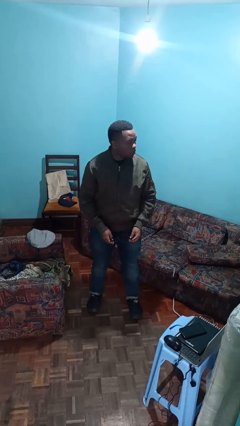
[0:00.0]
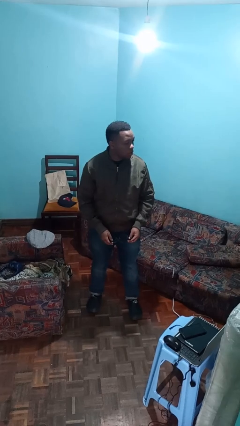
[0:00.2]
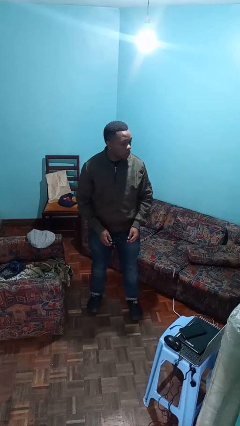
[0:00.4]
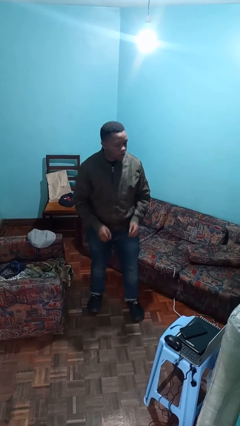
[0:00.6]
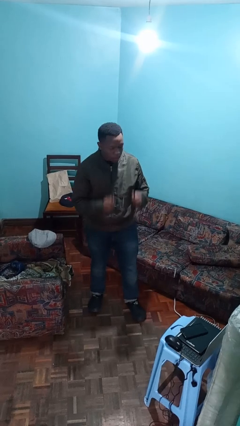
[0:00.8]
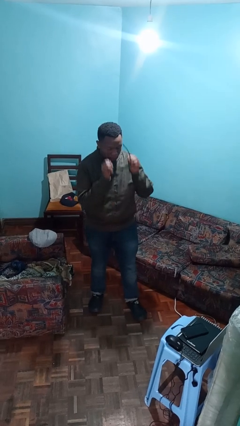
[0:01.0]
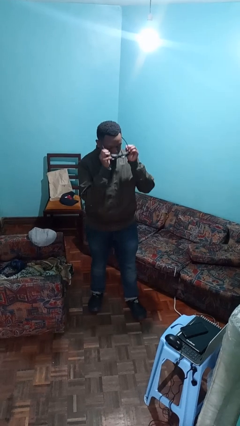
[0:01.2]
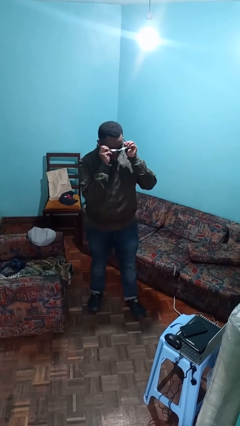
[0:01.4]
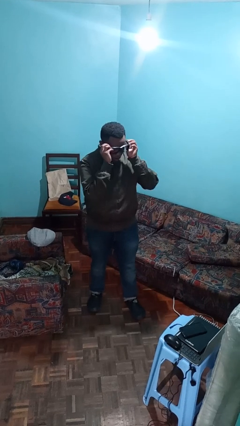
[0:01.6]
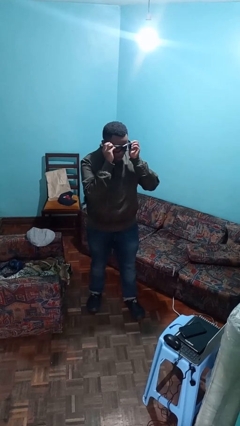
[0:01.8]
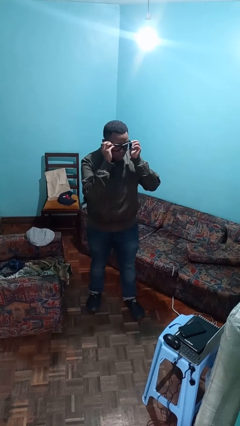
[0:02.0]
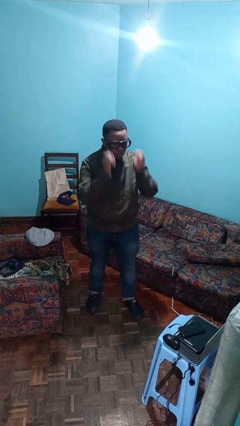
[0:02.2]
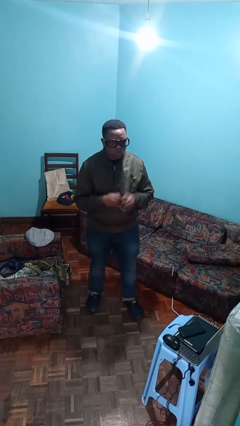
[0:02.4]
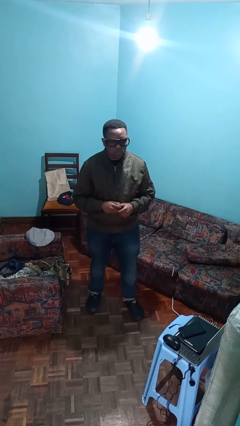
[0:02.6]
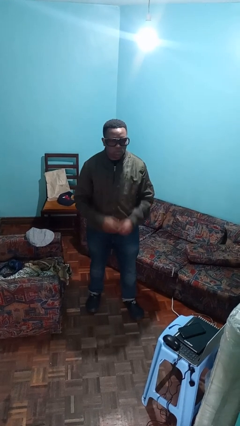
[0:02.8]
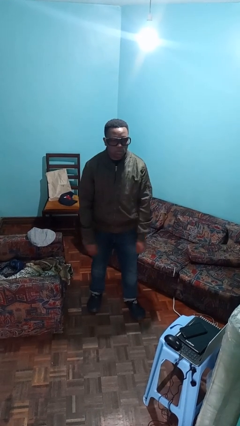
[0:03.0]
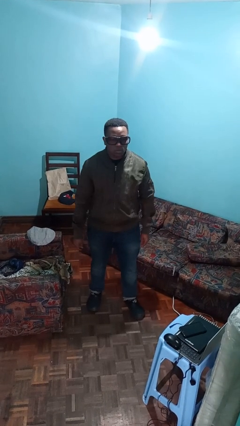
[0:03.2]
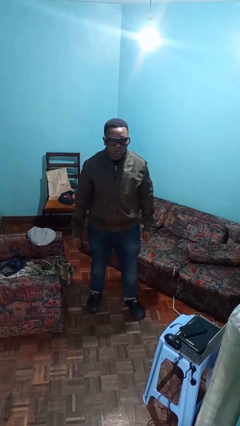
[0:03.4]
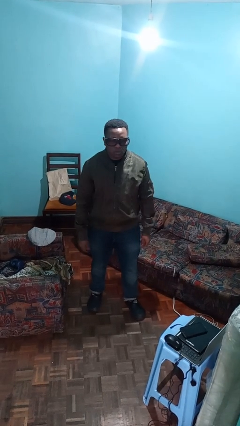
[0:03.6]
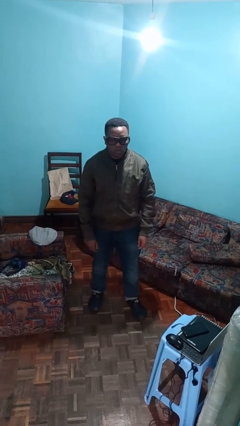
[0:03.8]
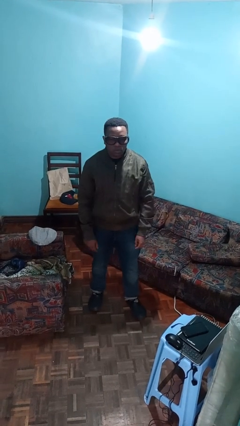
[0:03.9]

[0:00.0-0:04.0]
person puts on glasses

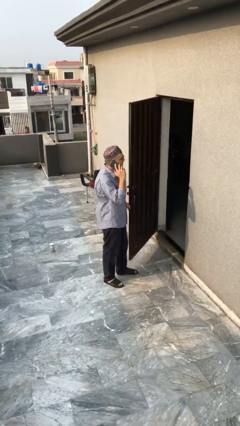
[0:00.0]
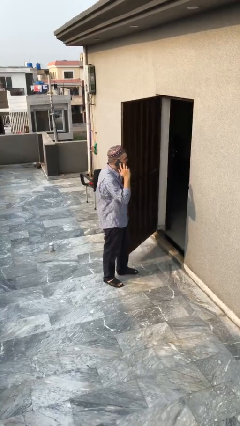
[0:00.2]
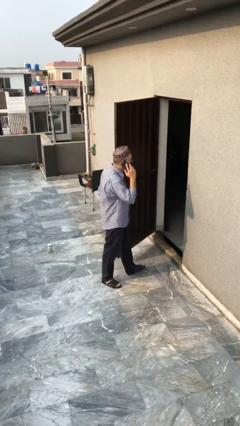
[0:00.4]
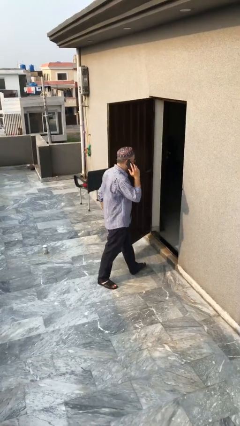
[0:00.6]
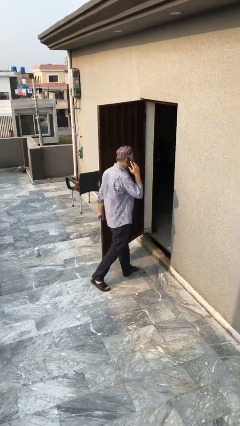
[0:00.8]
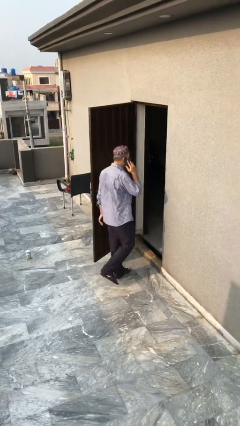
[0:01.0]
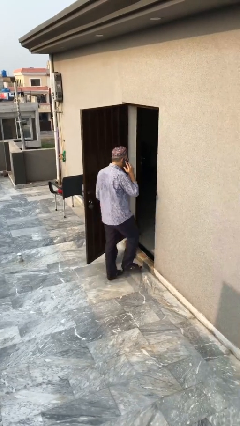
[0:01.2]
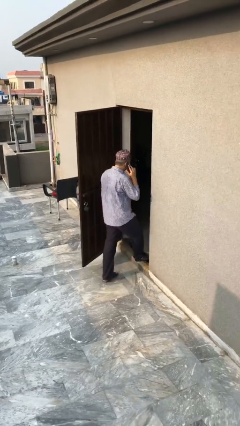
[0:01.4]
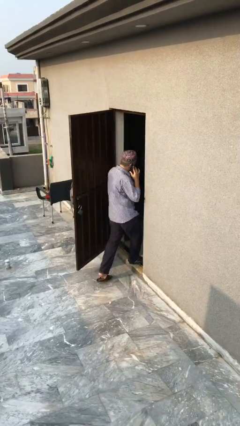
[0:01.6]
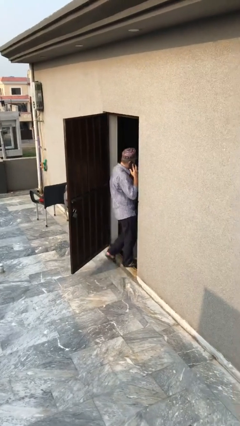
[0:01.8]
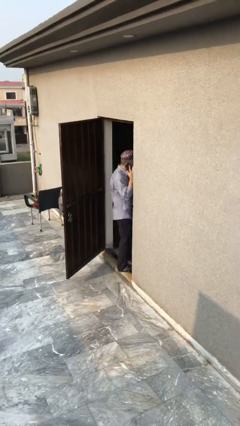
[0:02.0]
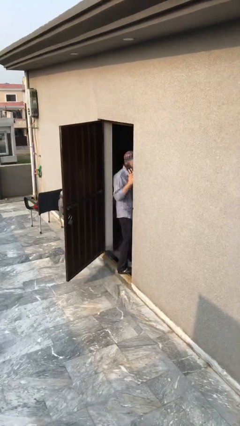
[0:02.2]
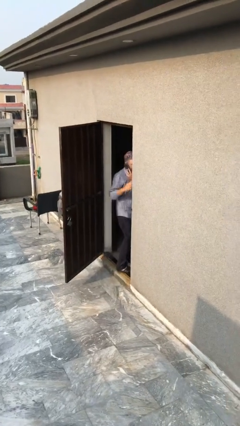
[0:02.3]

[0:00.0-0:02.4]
person exits scene through structure

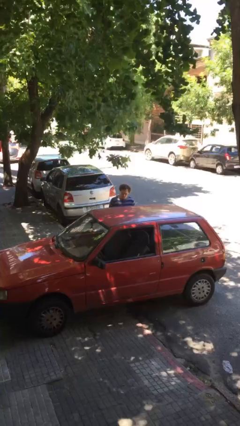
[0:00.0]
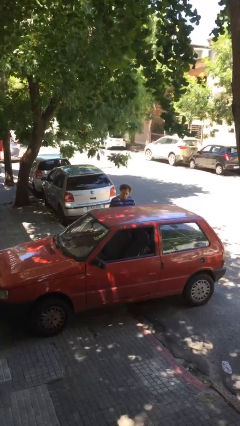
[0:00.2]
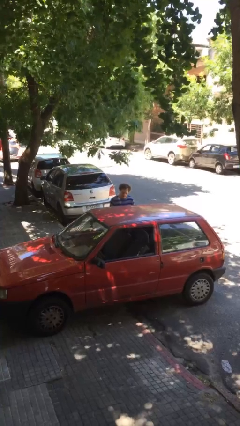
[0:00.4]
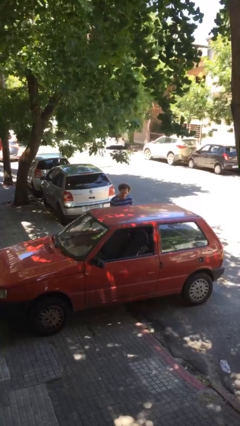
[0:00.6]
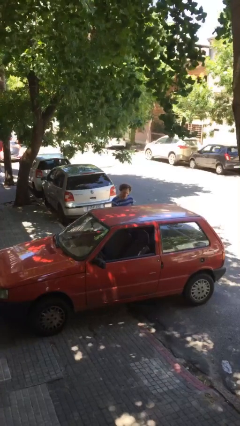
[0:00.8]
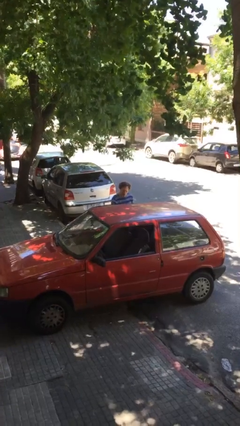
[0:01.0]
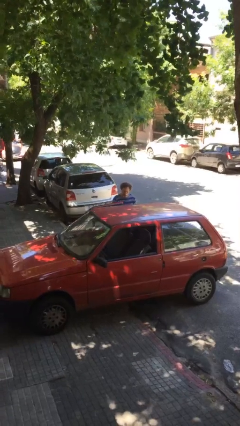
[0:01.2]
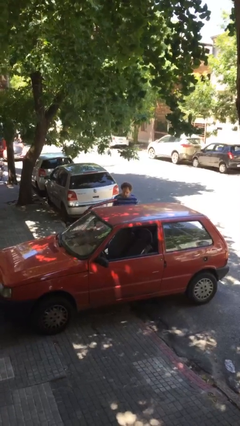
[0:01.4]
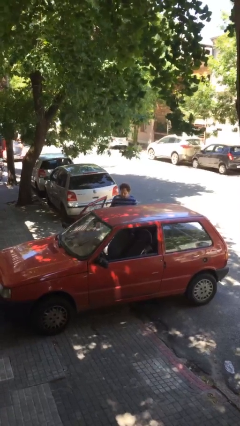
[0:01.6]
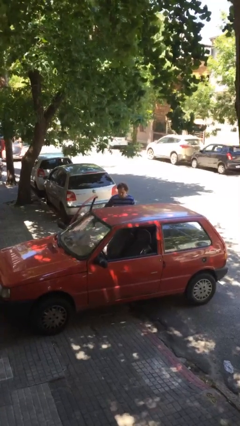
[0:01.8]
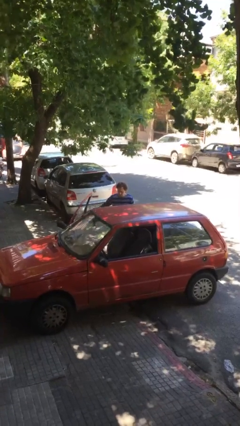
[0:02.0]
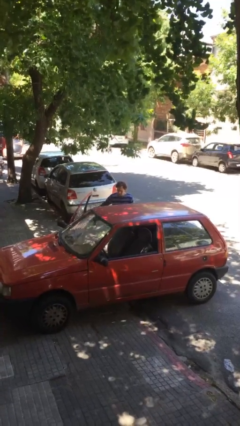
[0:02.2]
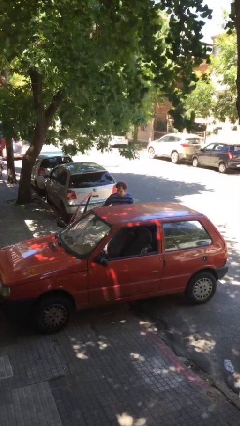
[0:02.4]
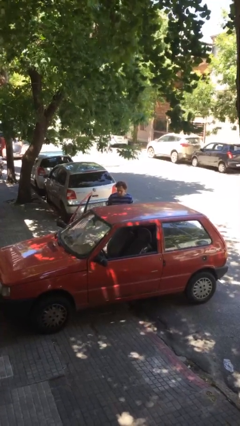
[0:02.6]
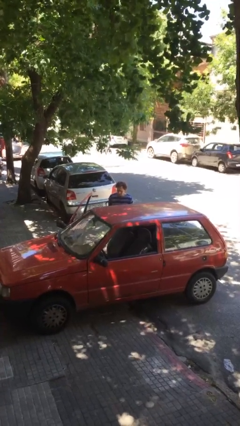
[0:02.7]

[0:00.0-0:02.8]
person opens car door

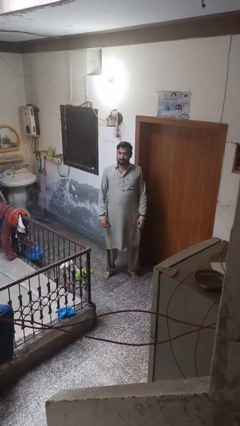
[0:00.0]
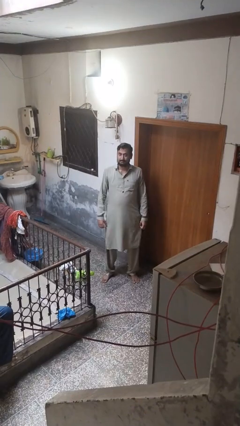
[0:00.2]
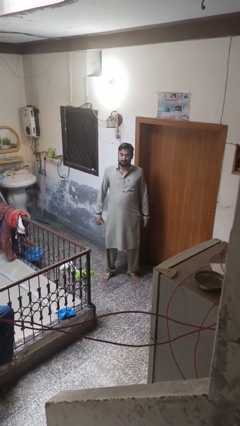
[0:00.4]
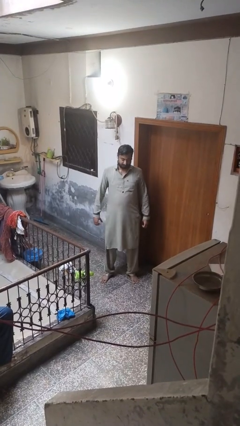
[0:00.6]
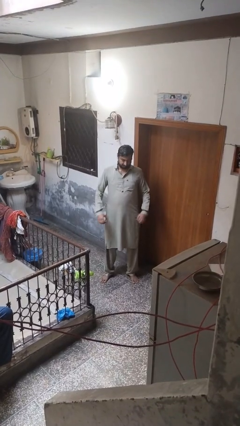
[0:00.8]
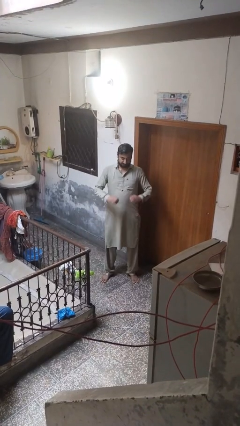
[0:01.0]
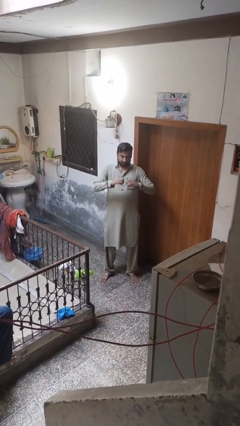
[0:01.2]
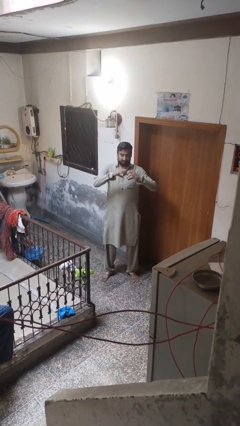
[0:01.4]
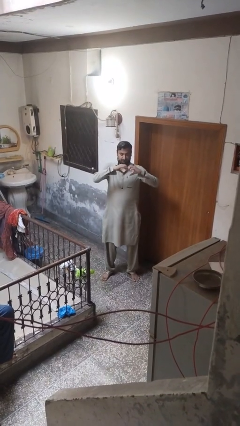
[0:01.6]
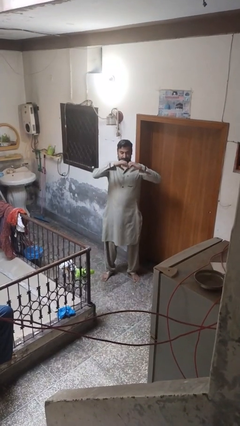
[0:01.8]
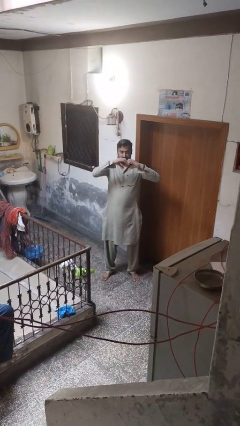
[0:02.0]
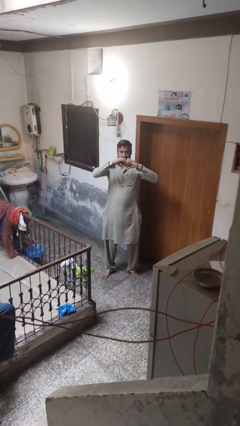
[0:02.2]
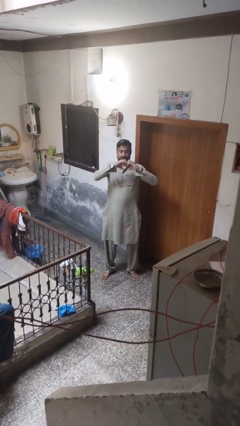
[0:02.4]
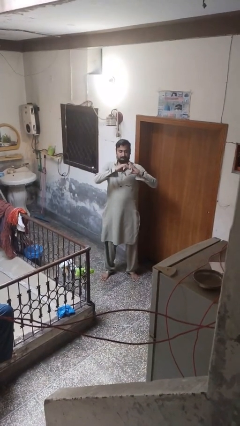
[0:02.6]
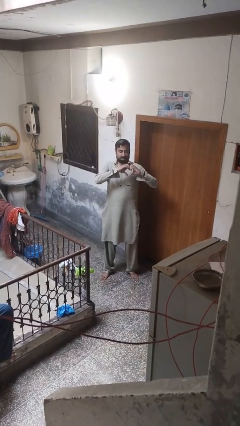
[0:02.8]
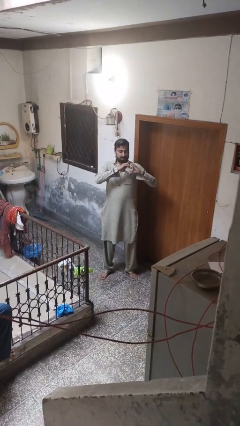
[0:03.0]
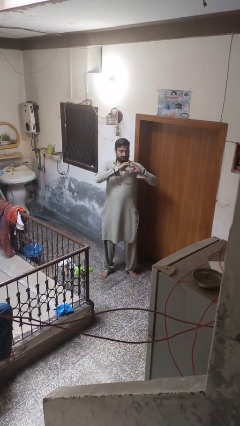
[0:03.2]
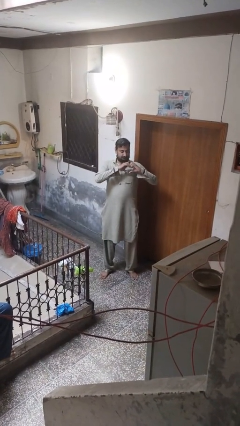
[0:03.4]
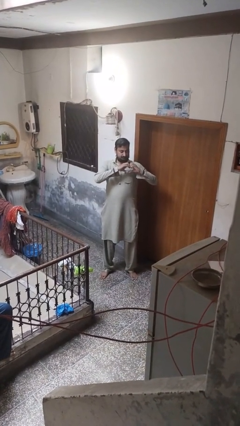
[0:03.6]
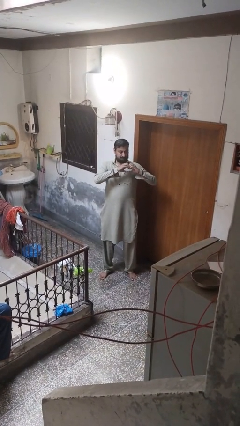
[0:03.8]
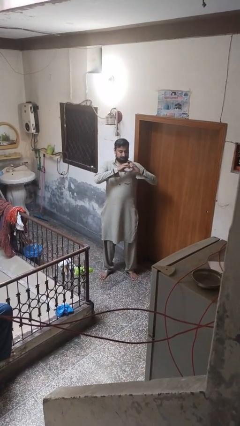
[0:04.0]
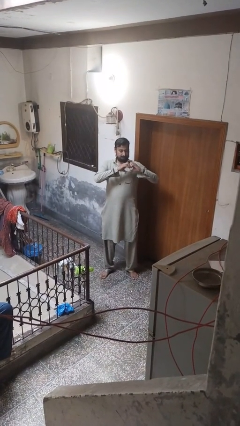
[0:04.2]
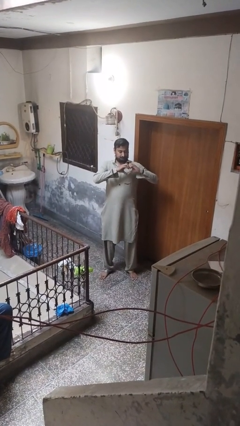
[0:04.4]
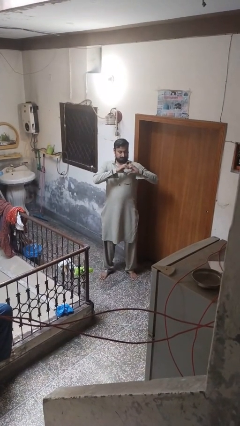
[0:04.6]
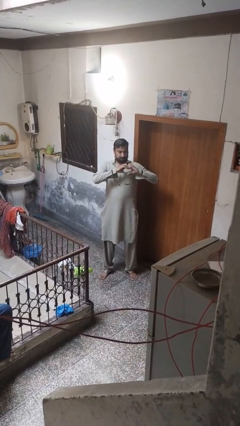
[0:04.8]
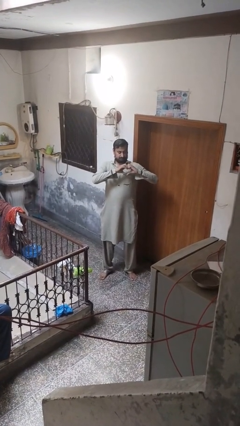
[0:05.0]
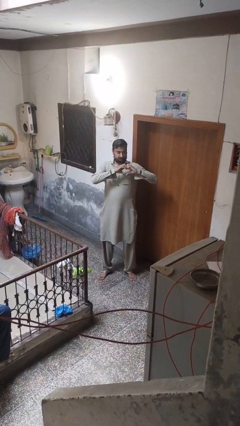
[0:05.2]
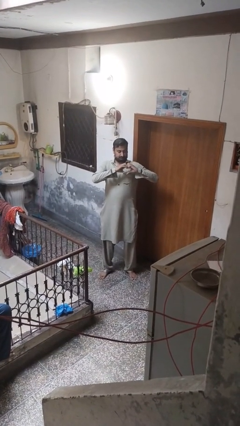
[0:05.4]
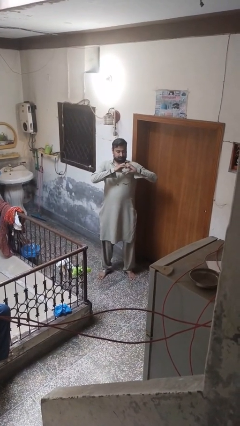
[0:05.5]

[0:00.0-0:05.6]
person gestures heart

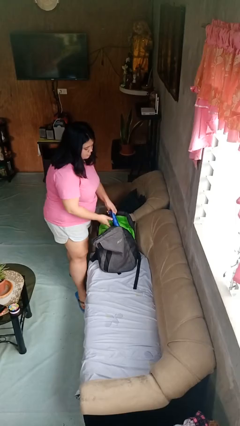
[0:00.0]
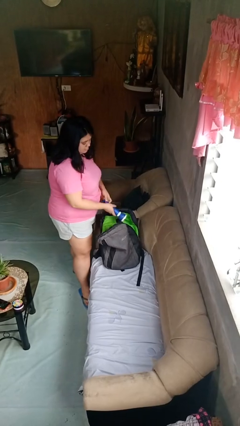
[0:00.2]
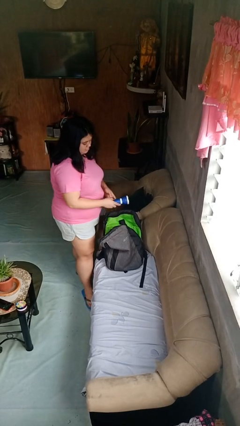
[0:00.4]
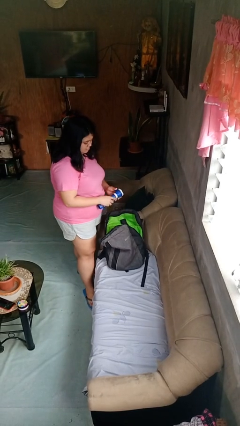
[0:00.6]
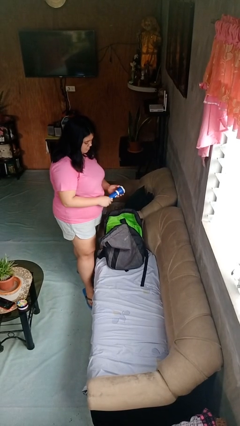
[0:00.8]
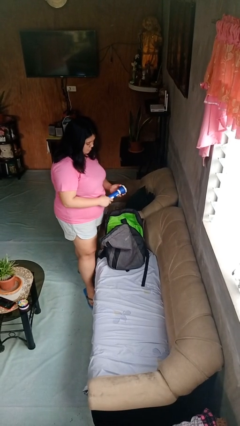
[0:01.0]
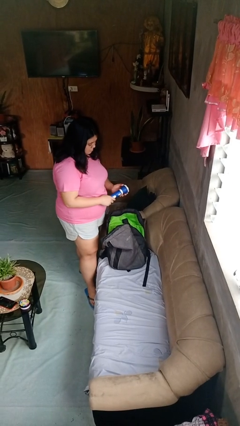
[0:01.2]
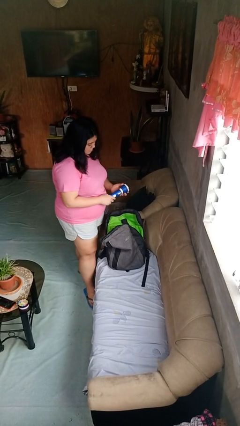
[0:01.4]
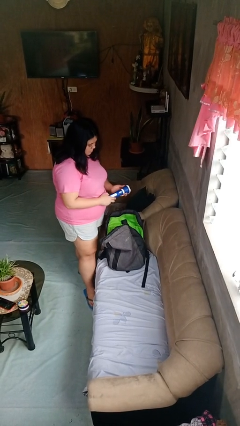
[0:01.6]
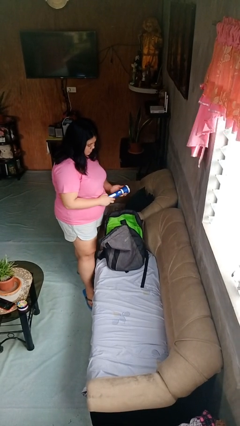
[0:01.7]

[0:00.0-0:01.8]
person takes object from backpack

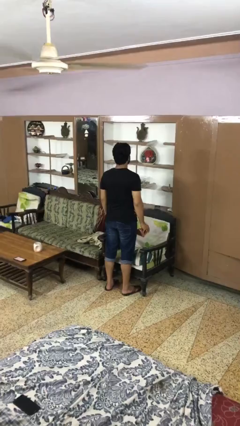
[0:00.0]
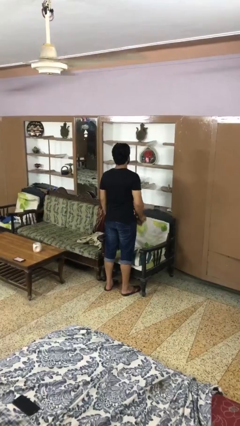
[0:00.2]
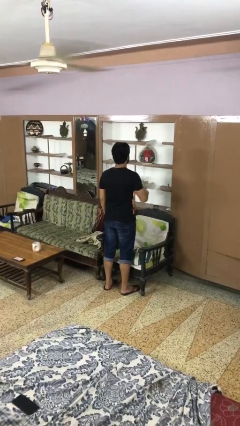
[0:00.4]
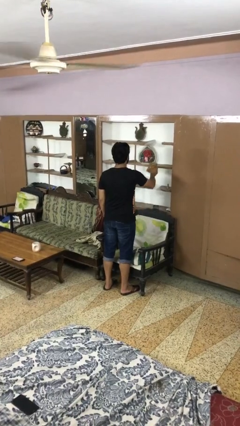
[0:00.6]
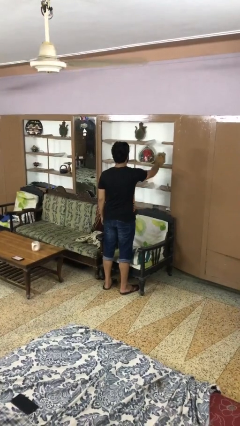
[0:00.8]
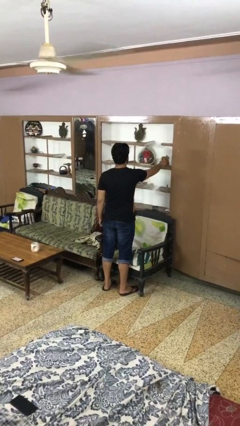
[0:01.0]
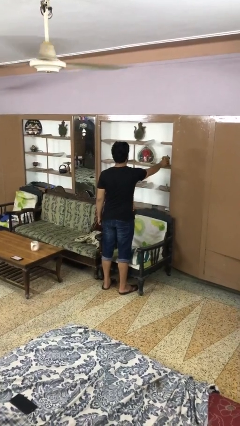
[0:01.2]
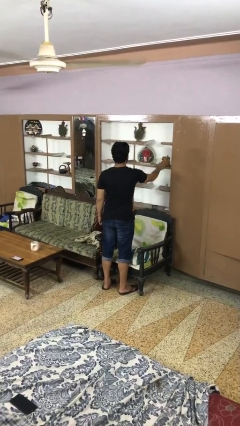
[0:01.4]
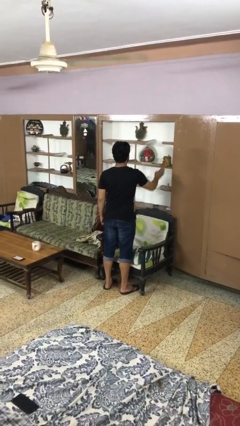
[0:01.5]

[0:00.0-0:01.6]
person puts down object on shelf
